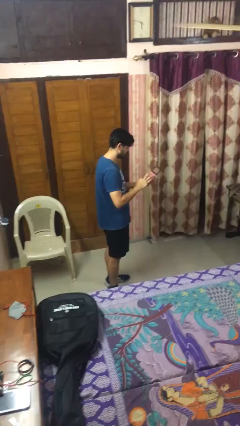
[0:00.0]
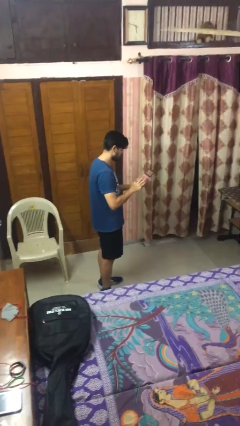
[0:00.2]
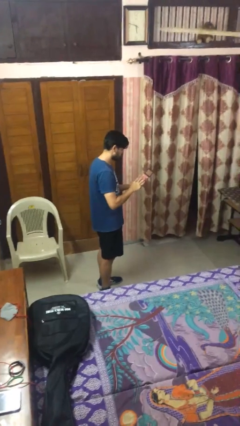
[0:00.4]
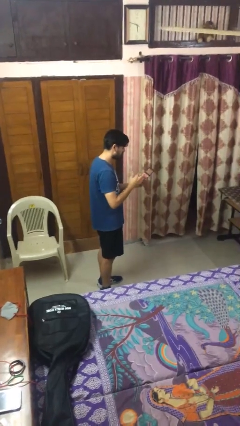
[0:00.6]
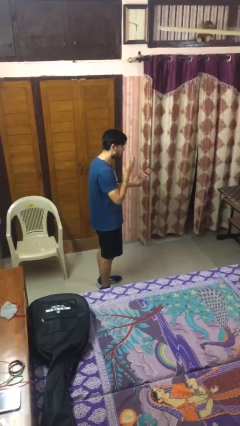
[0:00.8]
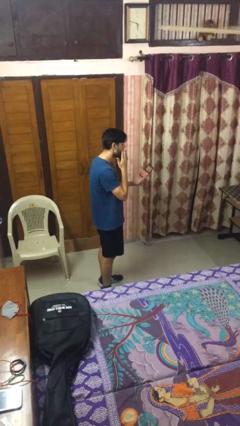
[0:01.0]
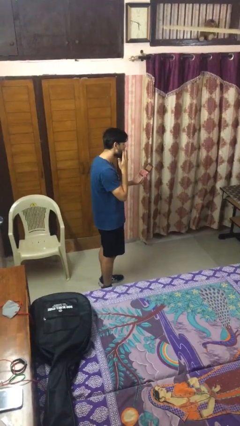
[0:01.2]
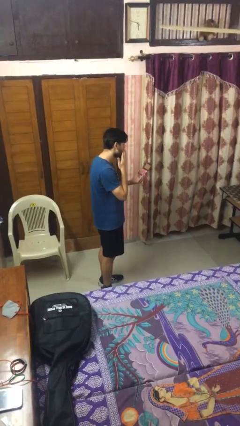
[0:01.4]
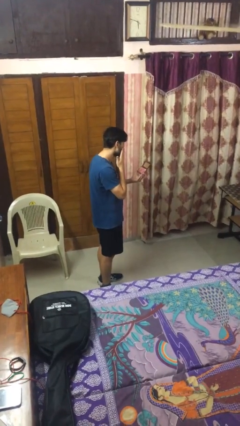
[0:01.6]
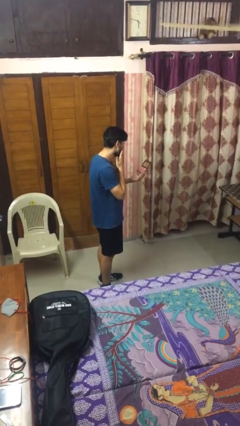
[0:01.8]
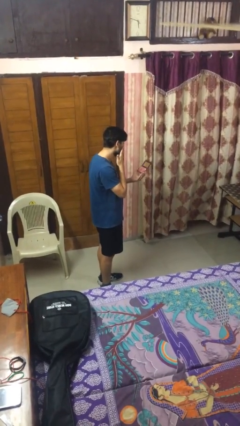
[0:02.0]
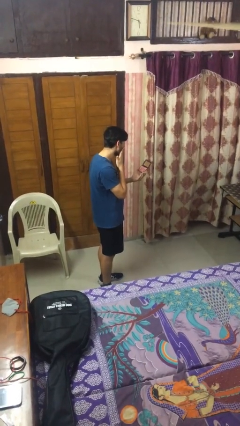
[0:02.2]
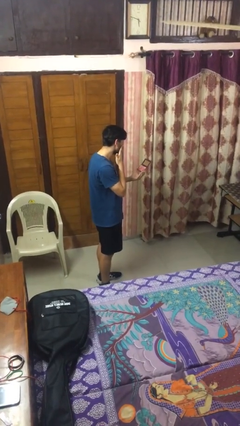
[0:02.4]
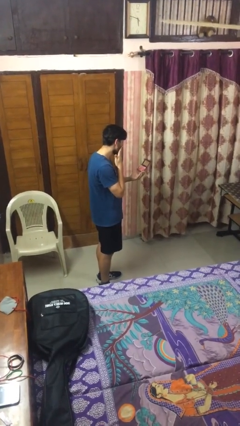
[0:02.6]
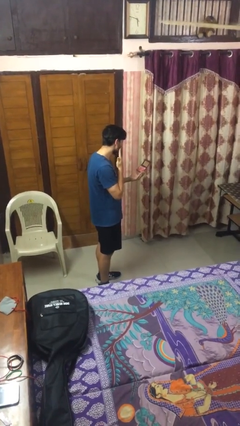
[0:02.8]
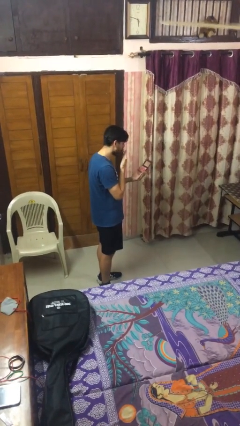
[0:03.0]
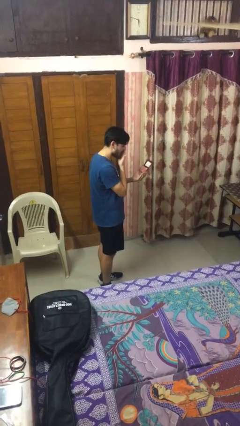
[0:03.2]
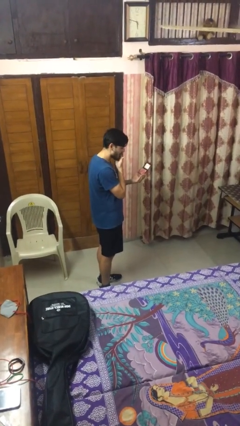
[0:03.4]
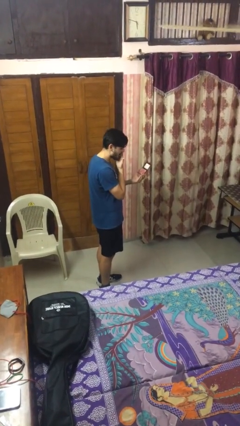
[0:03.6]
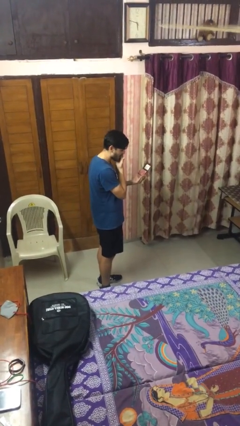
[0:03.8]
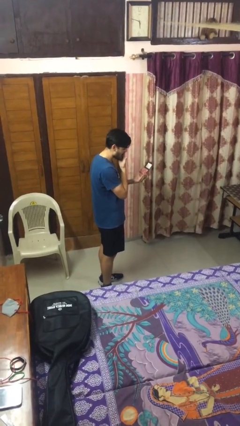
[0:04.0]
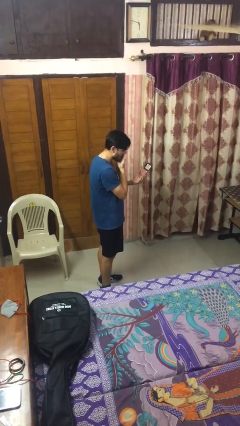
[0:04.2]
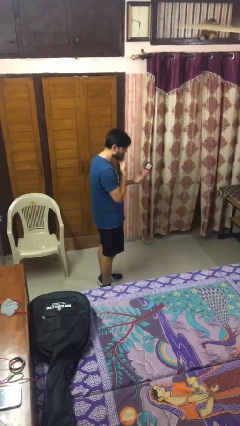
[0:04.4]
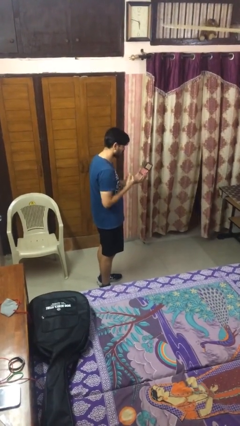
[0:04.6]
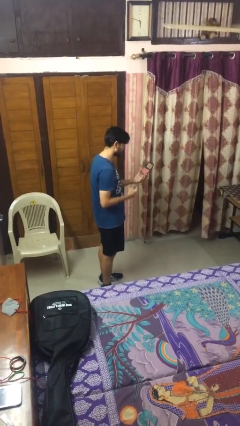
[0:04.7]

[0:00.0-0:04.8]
person applies foundation makeup

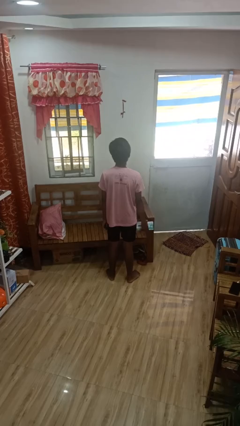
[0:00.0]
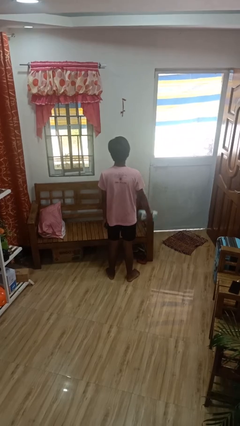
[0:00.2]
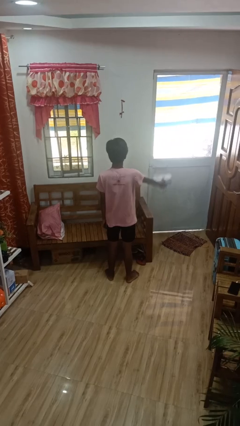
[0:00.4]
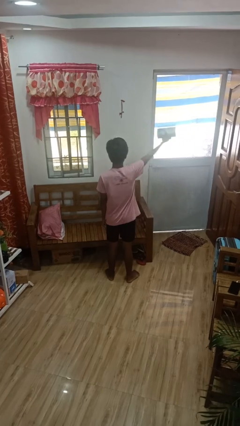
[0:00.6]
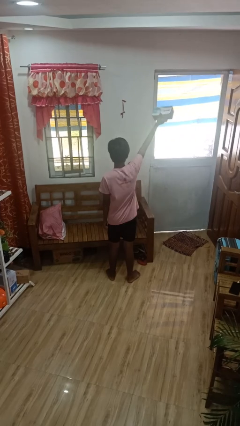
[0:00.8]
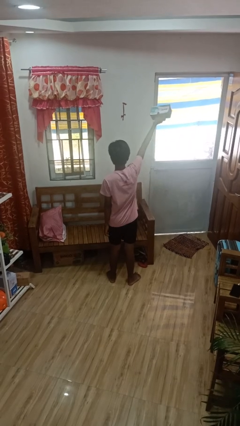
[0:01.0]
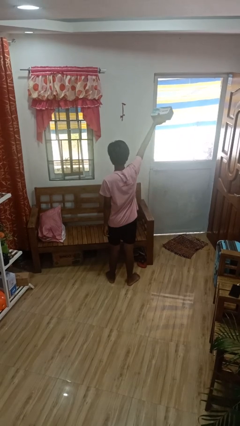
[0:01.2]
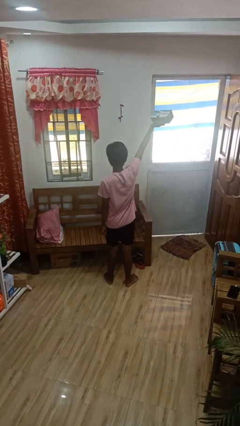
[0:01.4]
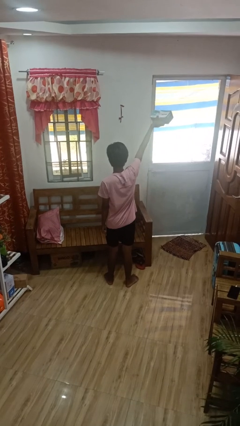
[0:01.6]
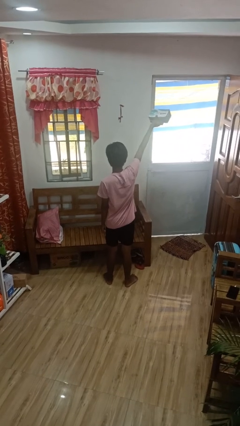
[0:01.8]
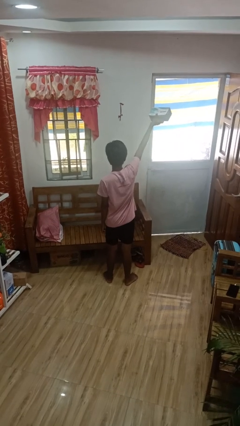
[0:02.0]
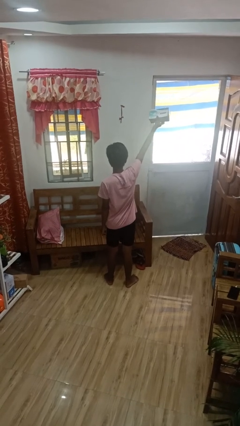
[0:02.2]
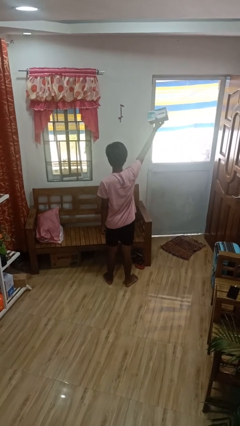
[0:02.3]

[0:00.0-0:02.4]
person holds object above head

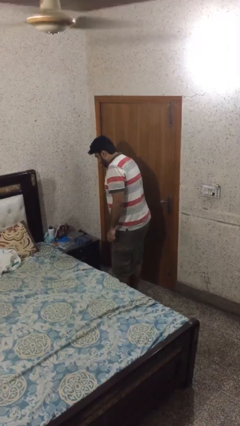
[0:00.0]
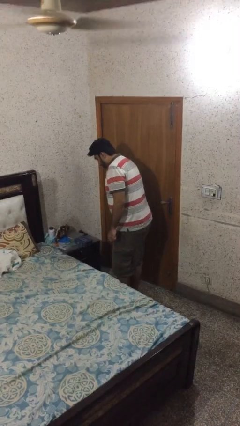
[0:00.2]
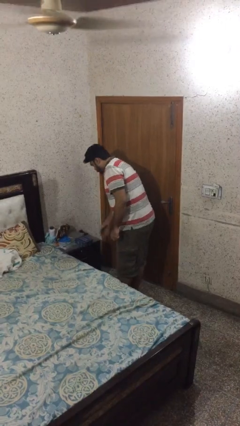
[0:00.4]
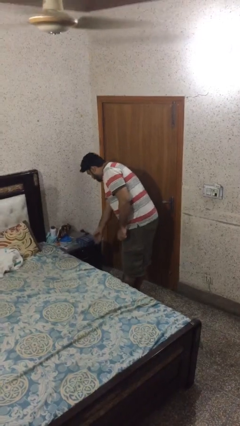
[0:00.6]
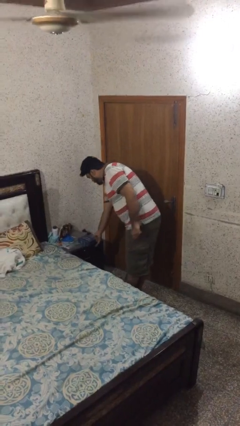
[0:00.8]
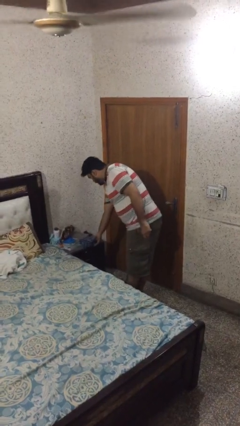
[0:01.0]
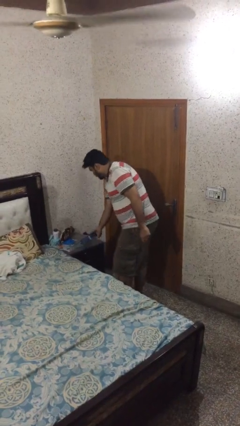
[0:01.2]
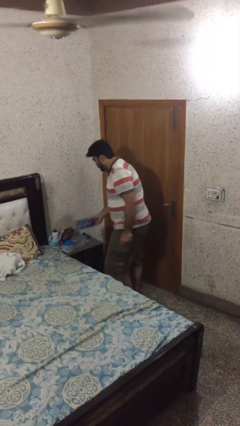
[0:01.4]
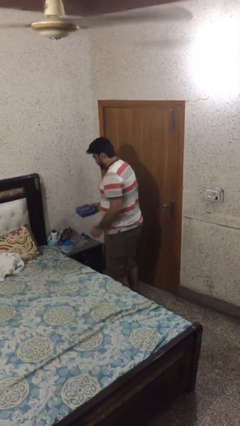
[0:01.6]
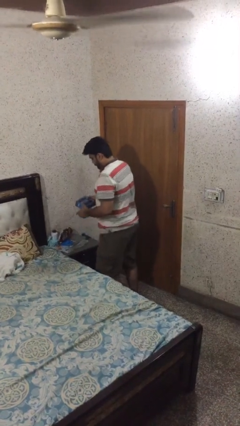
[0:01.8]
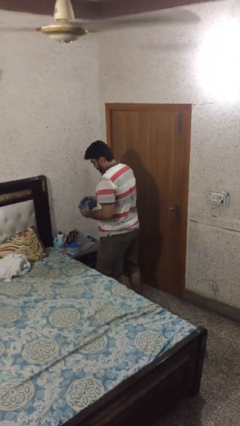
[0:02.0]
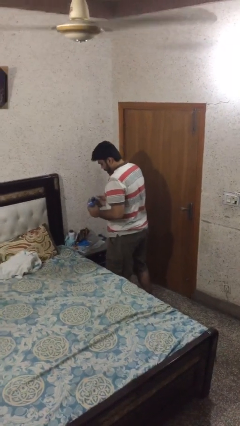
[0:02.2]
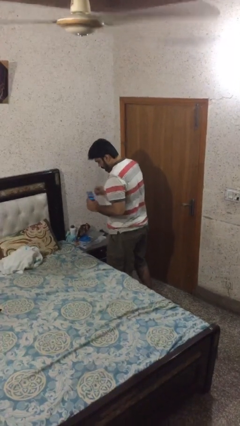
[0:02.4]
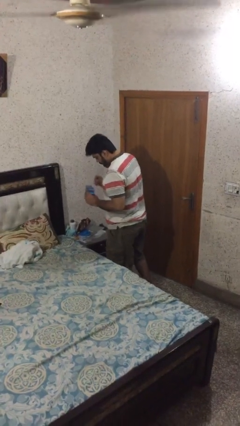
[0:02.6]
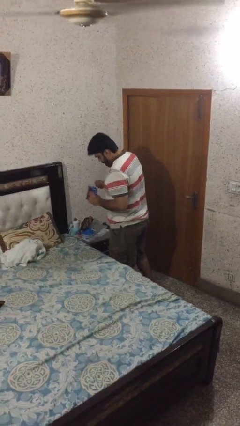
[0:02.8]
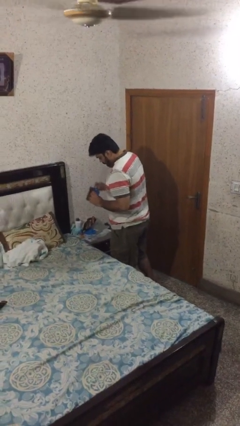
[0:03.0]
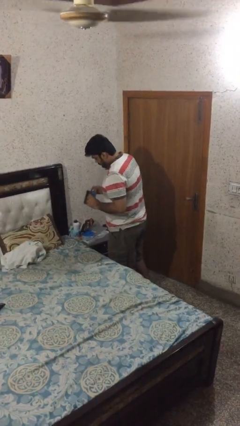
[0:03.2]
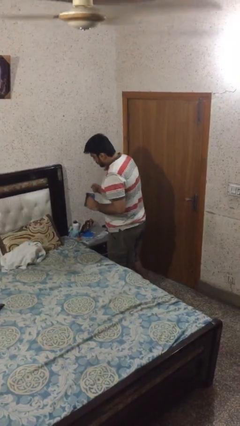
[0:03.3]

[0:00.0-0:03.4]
person picks up object from table

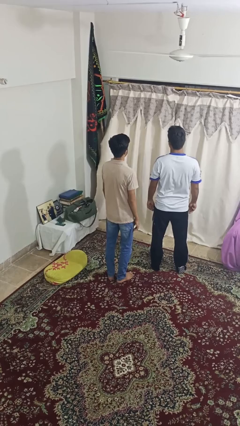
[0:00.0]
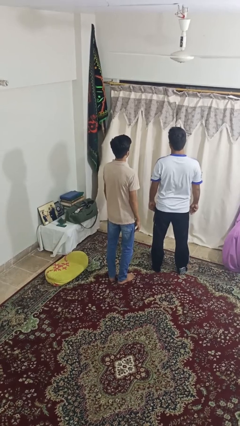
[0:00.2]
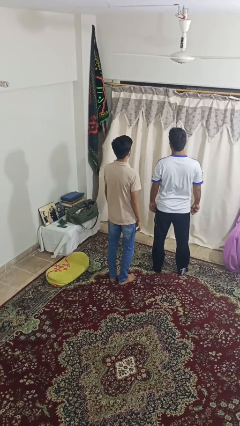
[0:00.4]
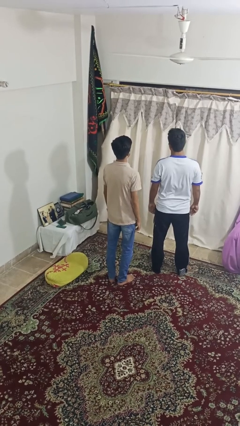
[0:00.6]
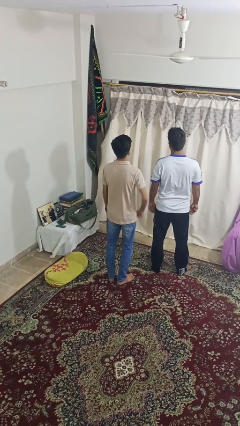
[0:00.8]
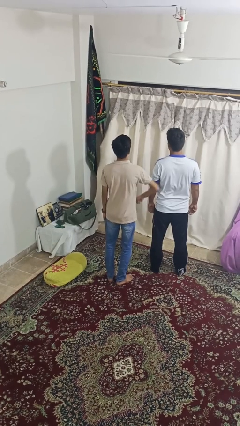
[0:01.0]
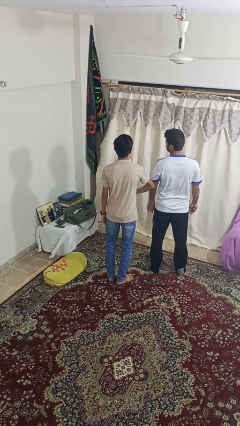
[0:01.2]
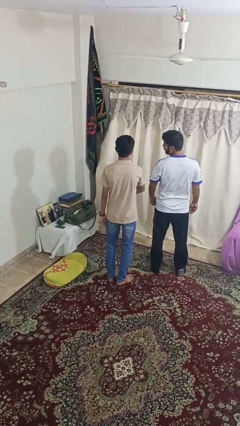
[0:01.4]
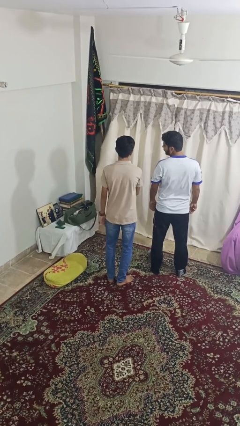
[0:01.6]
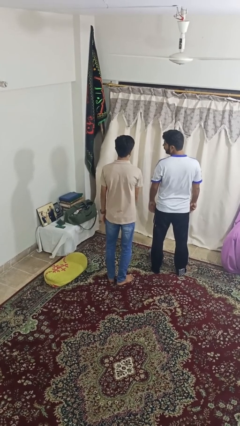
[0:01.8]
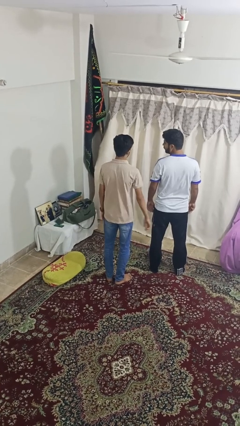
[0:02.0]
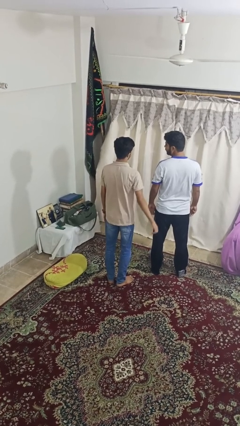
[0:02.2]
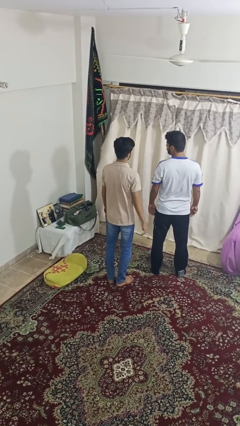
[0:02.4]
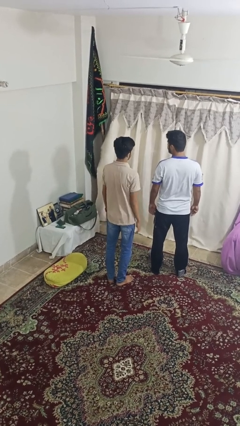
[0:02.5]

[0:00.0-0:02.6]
person nudges person with elbow

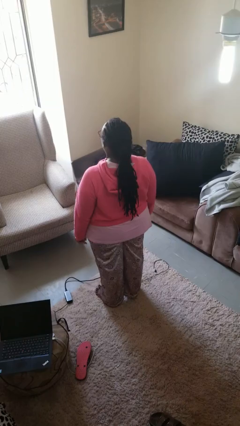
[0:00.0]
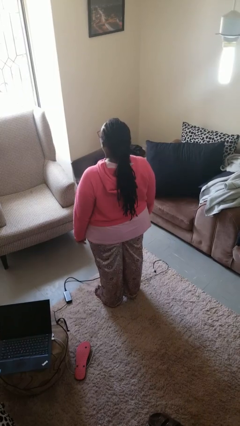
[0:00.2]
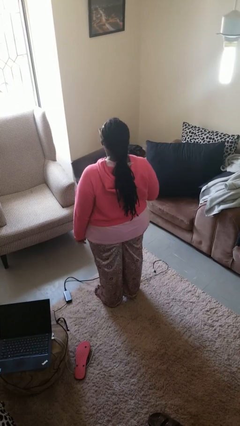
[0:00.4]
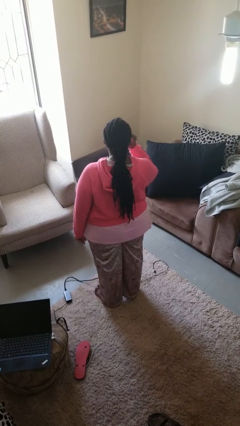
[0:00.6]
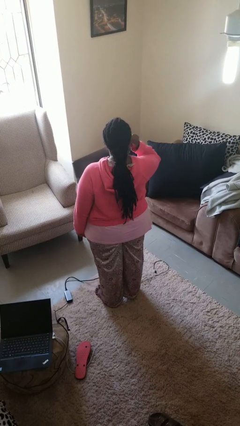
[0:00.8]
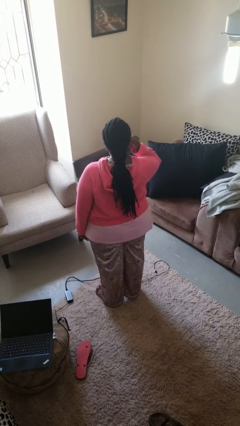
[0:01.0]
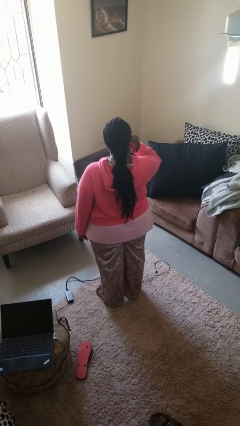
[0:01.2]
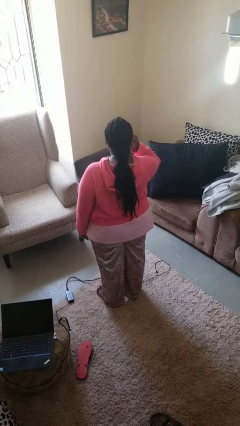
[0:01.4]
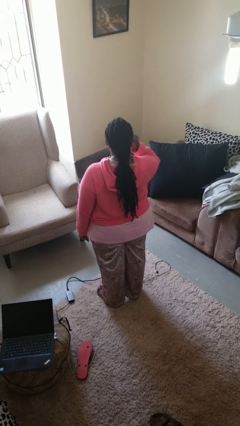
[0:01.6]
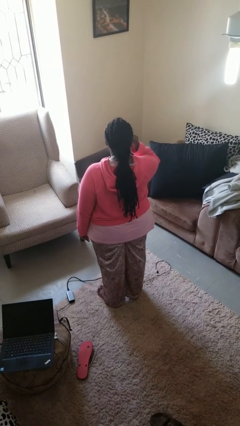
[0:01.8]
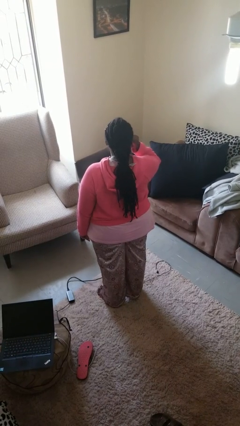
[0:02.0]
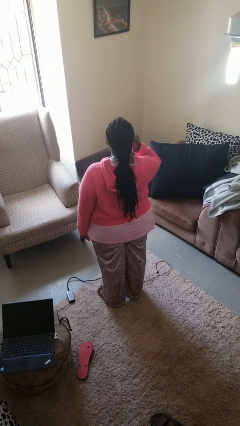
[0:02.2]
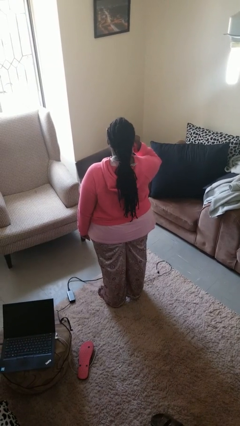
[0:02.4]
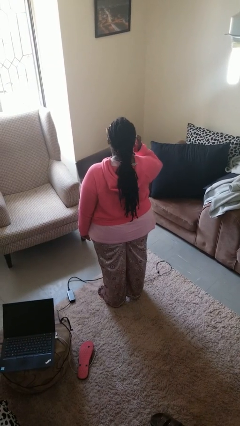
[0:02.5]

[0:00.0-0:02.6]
person gestures listen closely

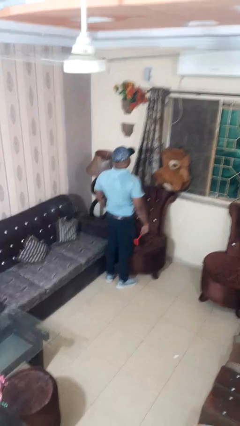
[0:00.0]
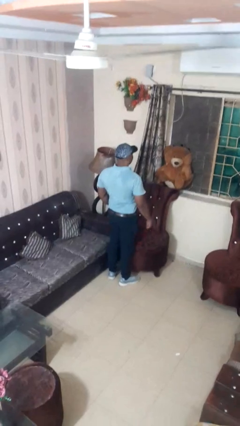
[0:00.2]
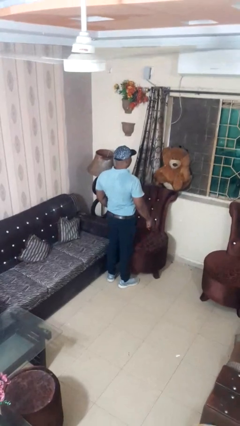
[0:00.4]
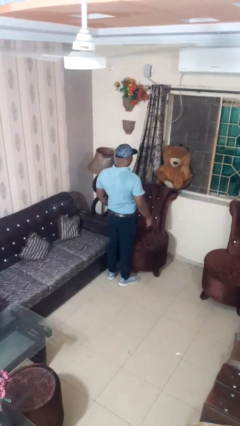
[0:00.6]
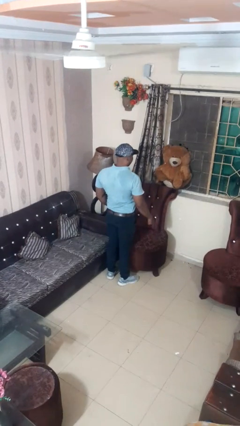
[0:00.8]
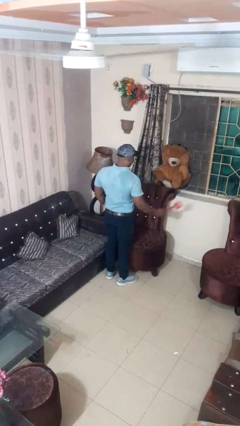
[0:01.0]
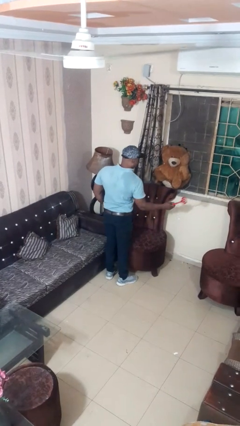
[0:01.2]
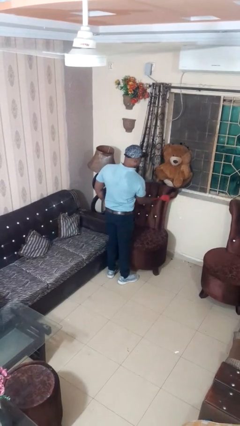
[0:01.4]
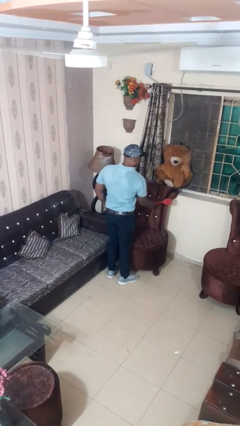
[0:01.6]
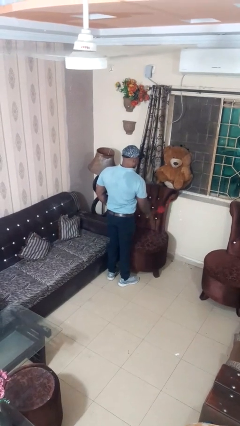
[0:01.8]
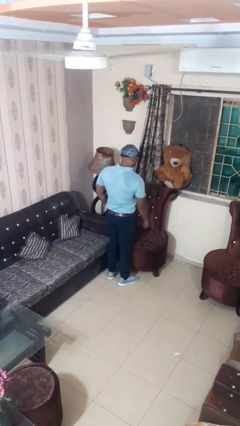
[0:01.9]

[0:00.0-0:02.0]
person swats bug
